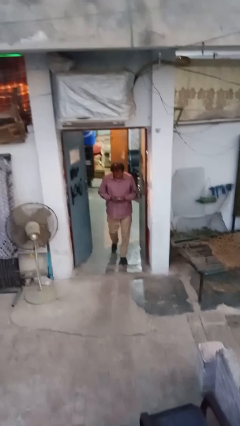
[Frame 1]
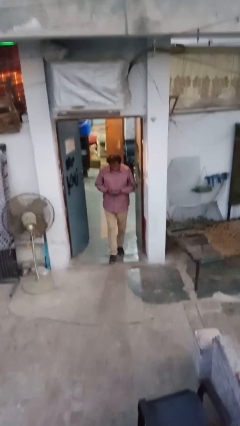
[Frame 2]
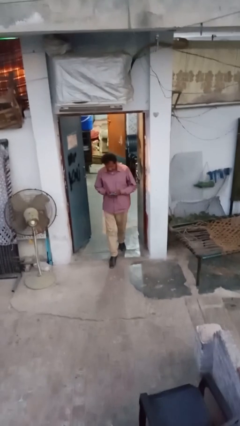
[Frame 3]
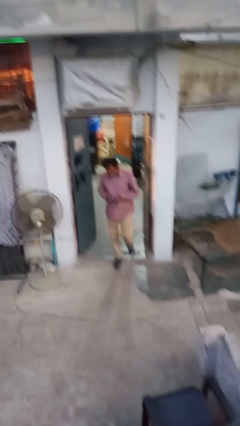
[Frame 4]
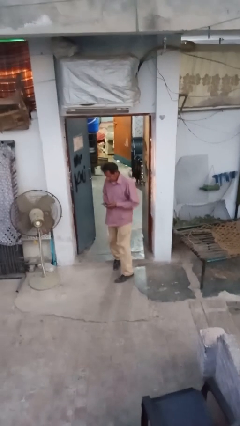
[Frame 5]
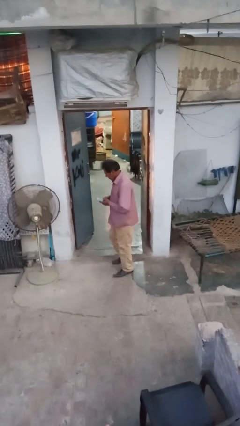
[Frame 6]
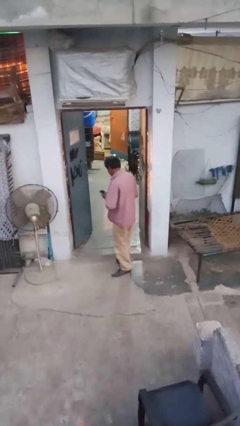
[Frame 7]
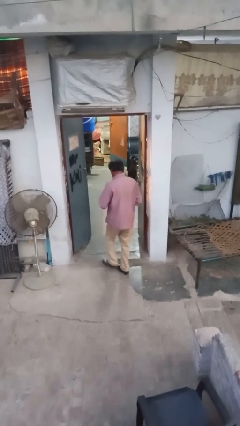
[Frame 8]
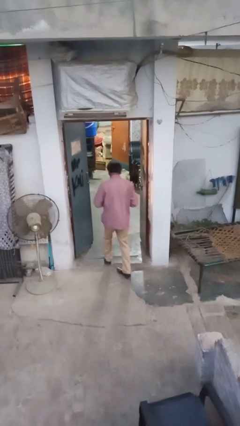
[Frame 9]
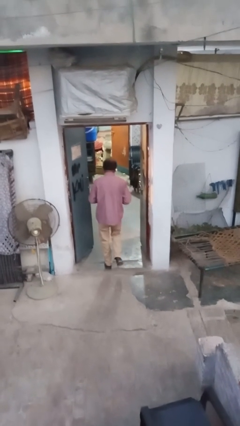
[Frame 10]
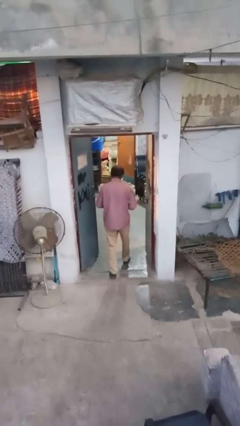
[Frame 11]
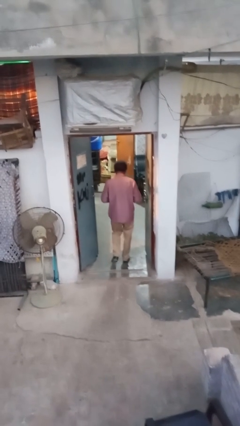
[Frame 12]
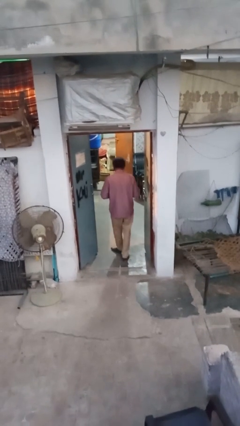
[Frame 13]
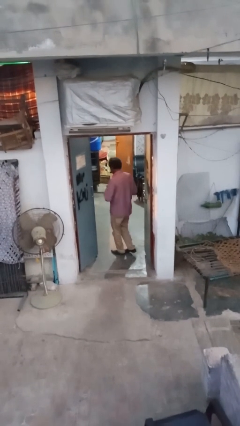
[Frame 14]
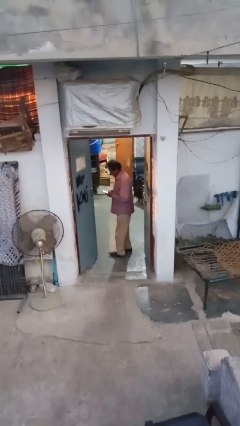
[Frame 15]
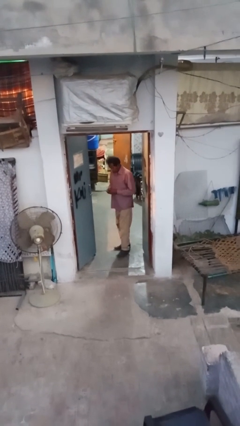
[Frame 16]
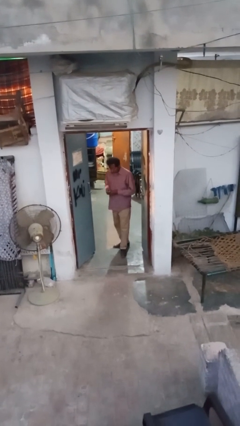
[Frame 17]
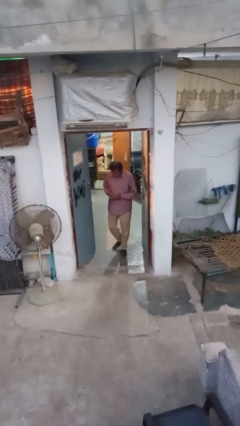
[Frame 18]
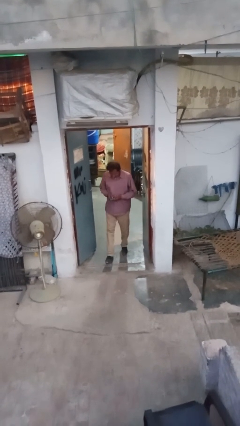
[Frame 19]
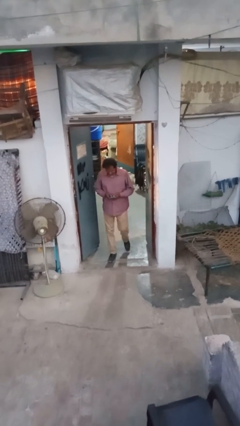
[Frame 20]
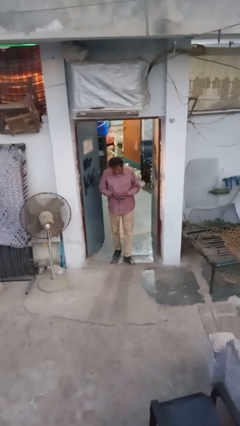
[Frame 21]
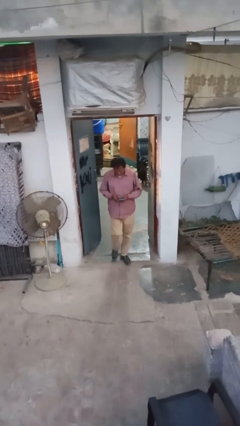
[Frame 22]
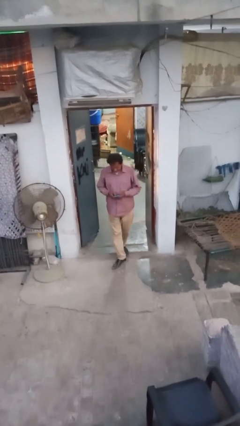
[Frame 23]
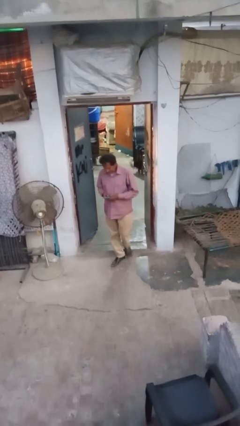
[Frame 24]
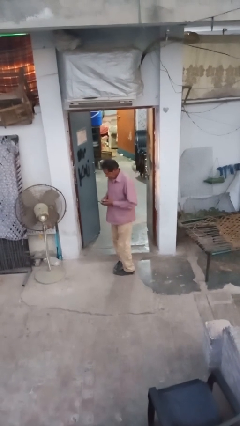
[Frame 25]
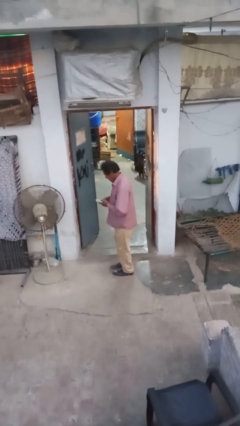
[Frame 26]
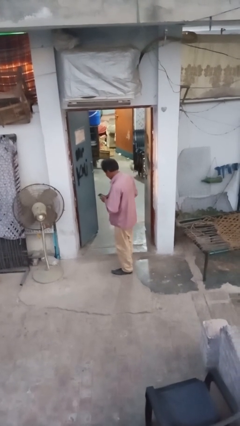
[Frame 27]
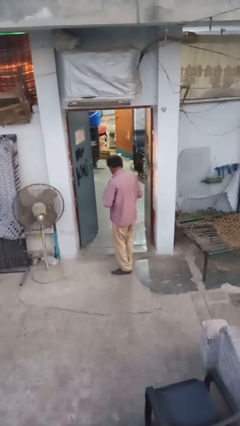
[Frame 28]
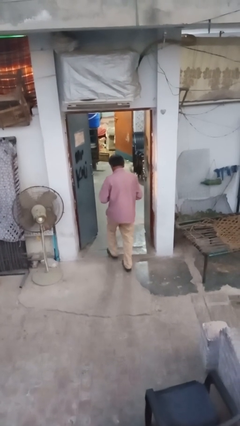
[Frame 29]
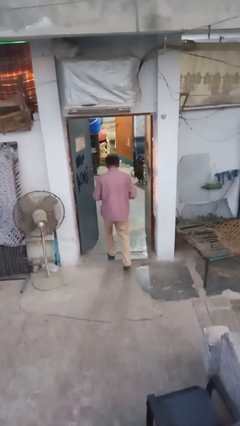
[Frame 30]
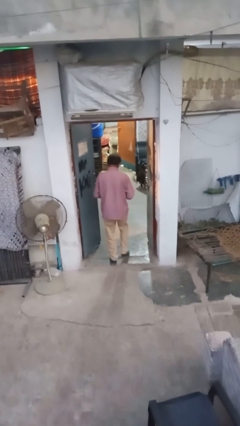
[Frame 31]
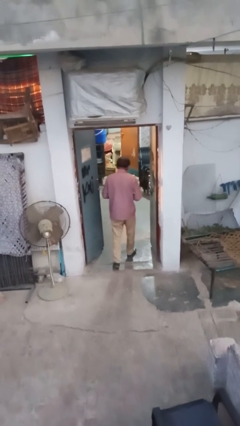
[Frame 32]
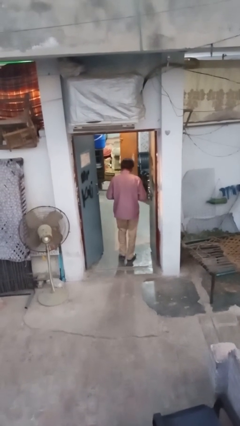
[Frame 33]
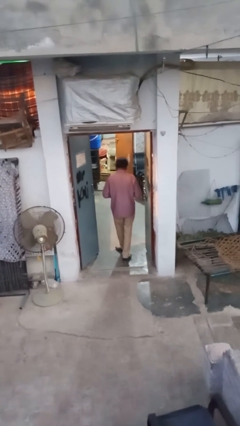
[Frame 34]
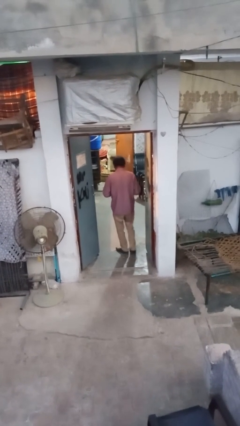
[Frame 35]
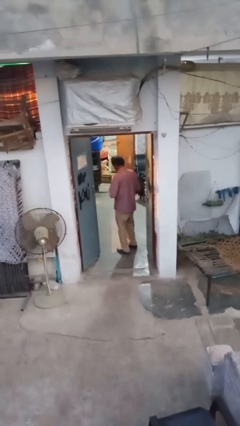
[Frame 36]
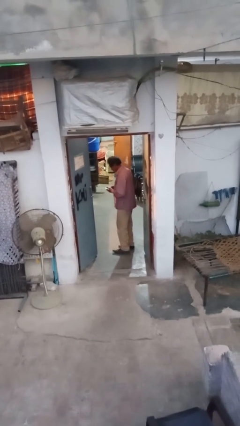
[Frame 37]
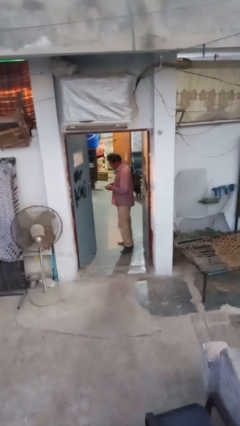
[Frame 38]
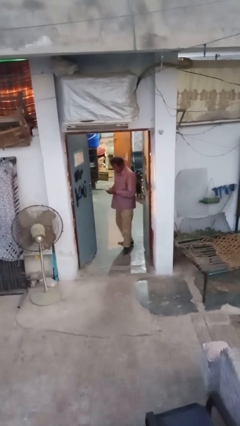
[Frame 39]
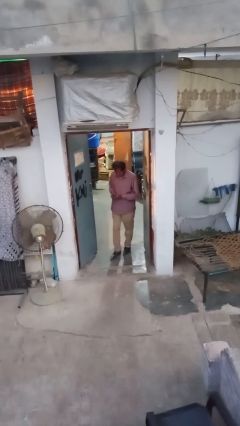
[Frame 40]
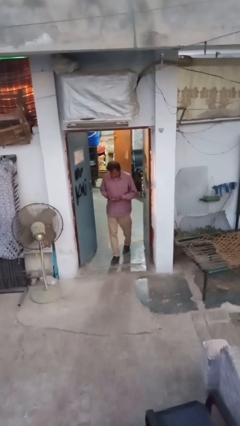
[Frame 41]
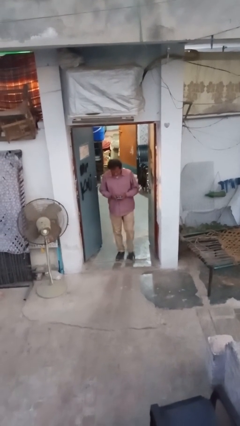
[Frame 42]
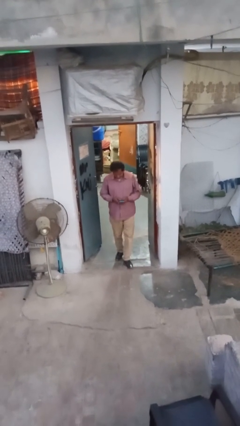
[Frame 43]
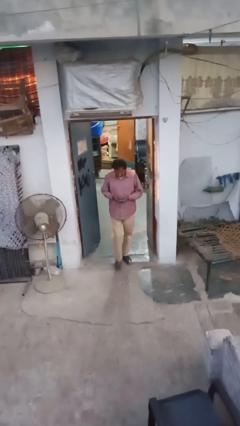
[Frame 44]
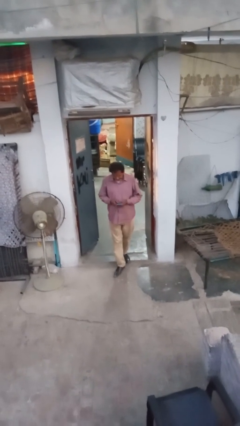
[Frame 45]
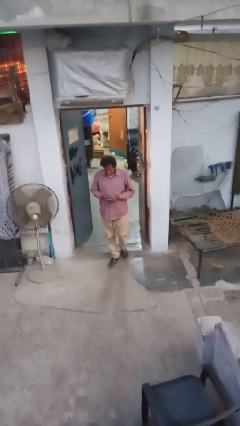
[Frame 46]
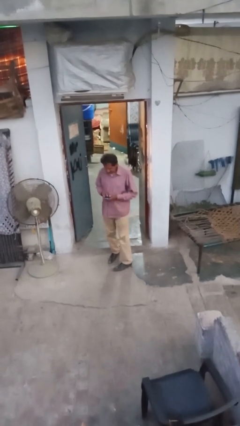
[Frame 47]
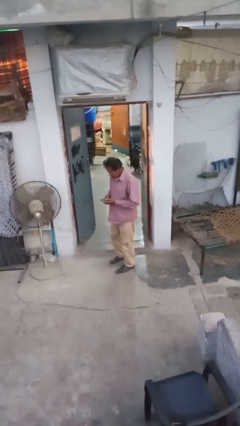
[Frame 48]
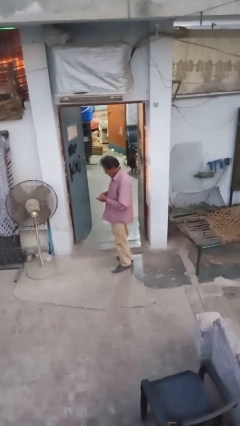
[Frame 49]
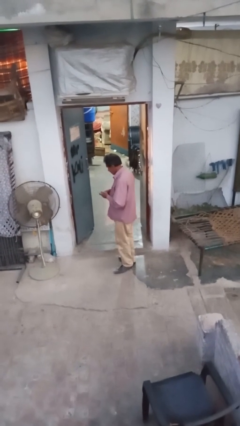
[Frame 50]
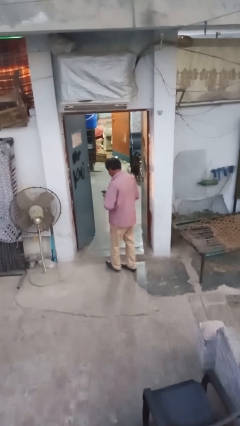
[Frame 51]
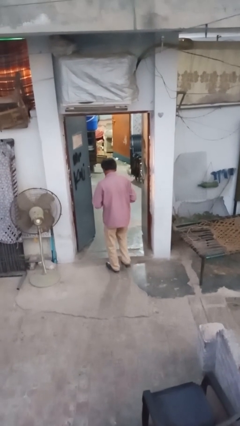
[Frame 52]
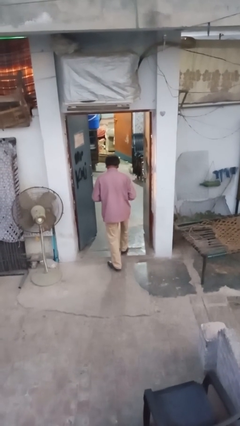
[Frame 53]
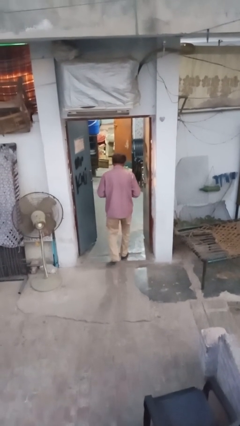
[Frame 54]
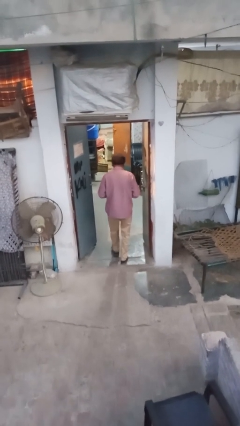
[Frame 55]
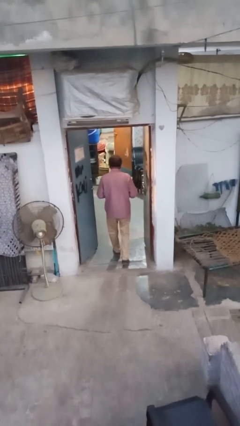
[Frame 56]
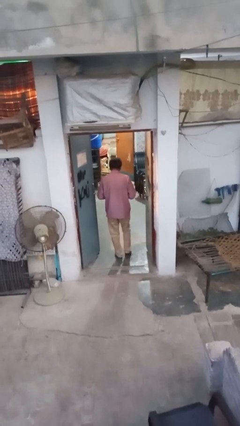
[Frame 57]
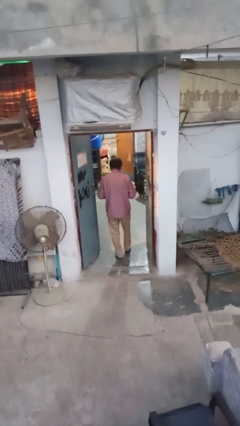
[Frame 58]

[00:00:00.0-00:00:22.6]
person texts on phone

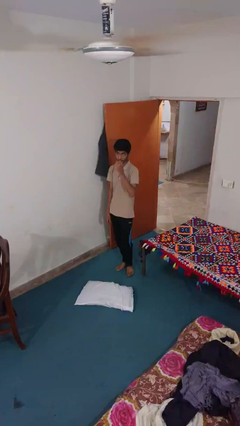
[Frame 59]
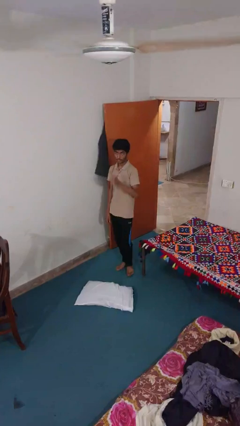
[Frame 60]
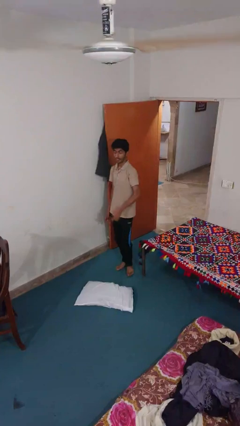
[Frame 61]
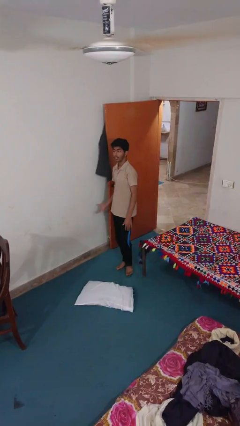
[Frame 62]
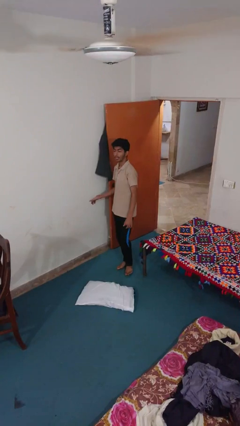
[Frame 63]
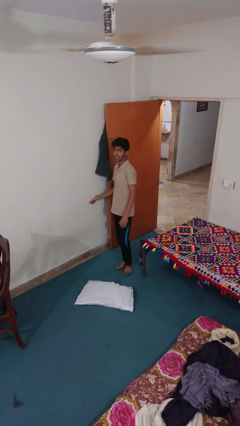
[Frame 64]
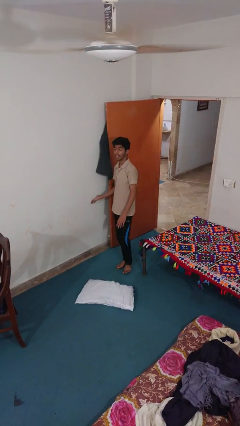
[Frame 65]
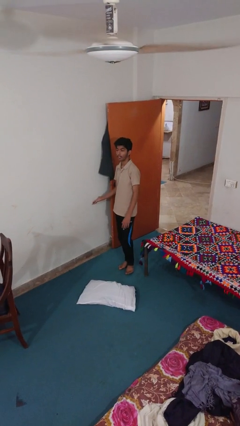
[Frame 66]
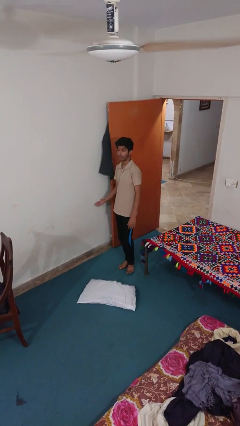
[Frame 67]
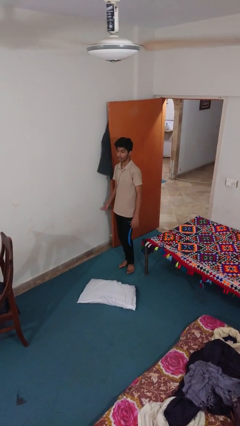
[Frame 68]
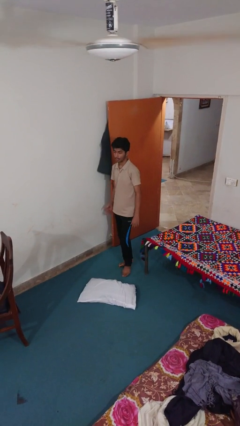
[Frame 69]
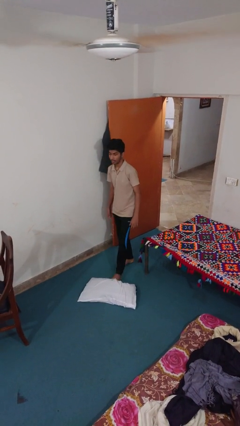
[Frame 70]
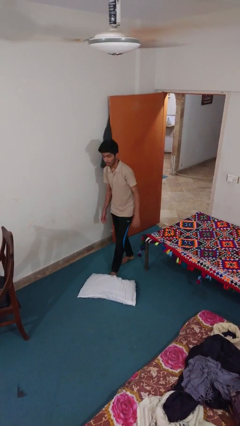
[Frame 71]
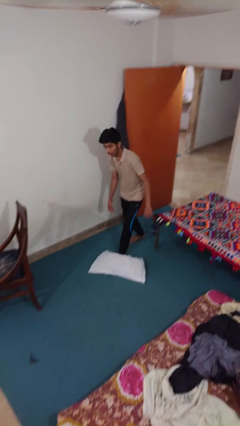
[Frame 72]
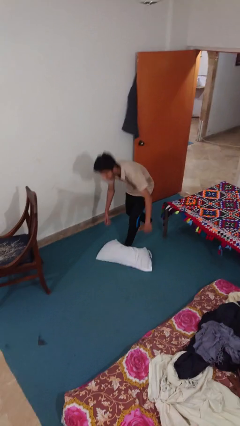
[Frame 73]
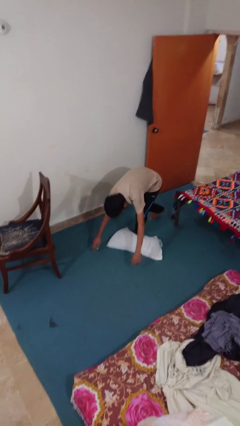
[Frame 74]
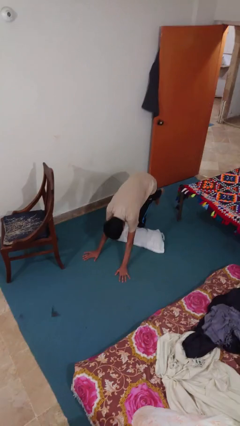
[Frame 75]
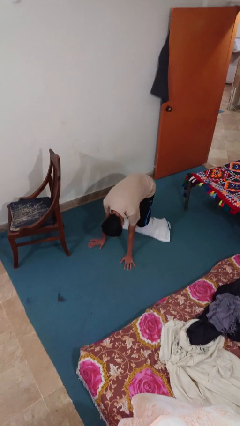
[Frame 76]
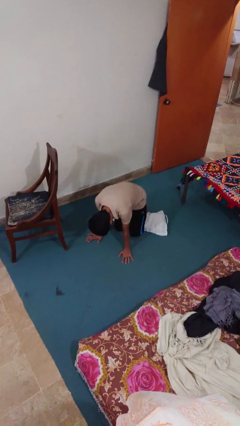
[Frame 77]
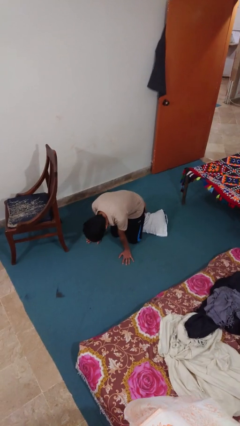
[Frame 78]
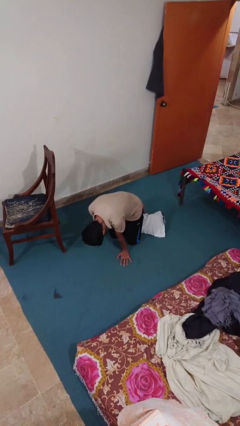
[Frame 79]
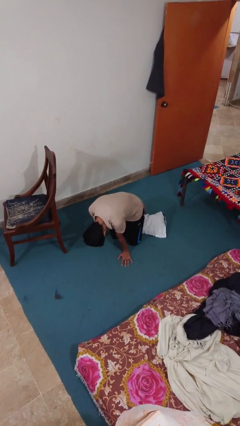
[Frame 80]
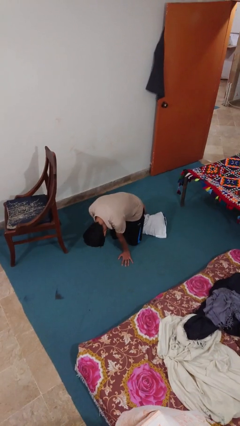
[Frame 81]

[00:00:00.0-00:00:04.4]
person trips on object on floor

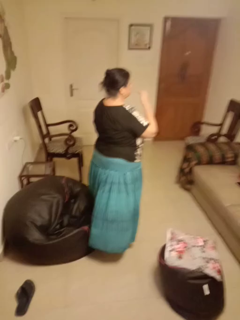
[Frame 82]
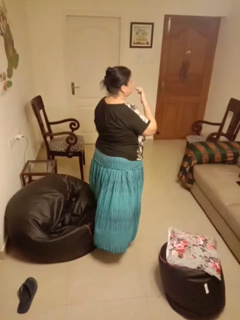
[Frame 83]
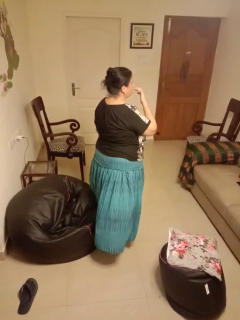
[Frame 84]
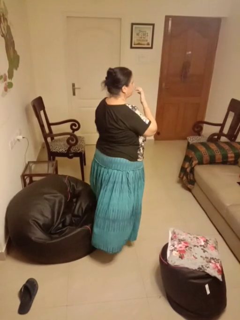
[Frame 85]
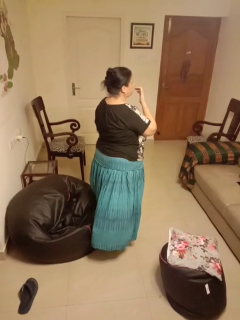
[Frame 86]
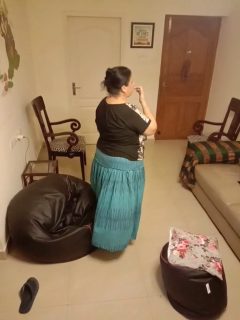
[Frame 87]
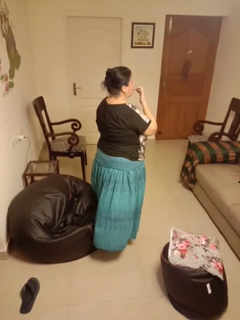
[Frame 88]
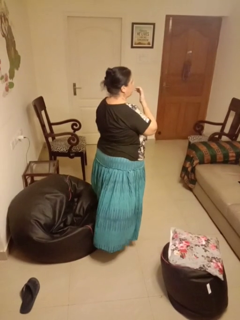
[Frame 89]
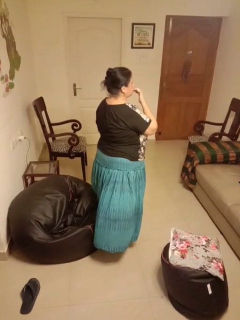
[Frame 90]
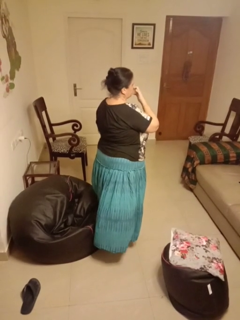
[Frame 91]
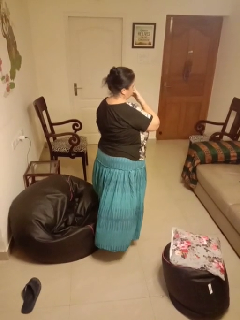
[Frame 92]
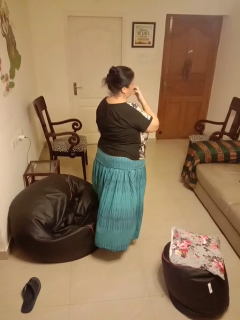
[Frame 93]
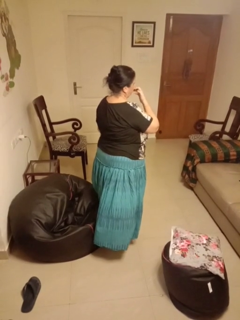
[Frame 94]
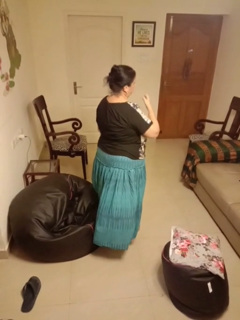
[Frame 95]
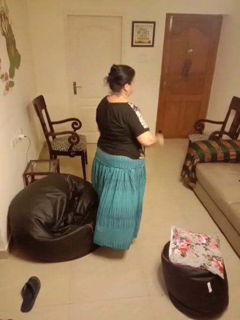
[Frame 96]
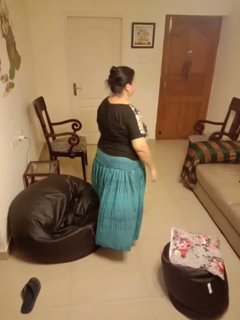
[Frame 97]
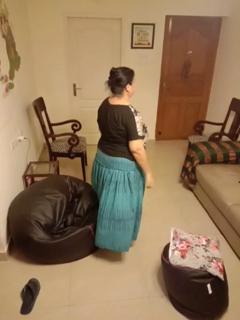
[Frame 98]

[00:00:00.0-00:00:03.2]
person licks fingers
